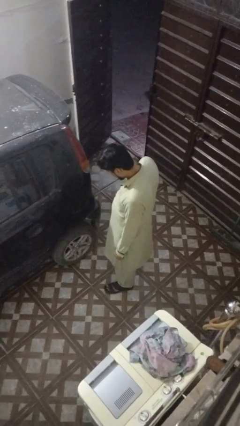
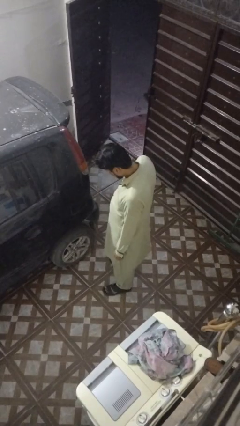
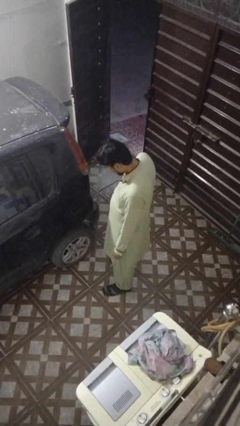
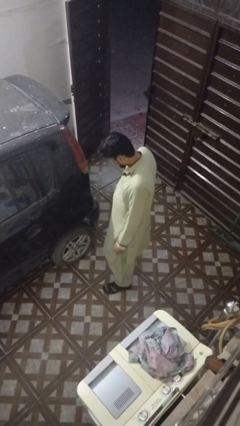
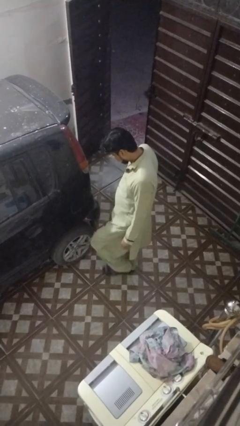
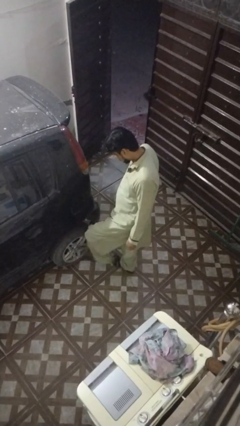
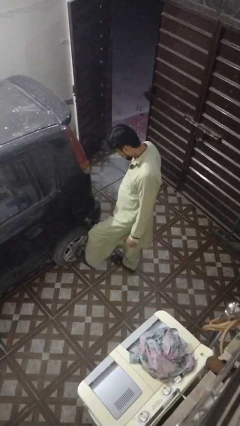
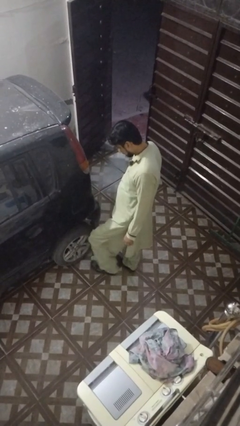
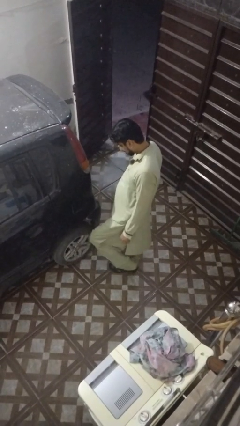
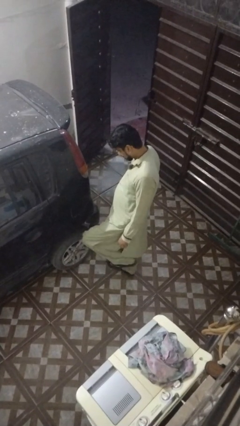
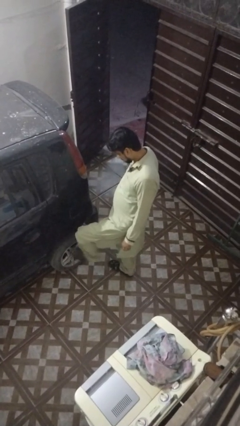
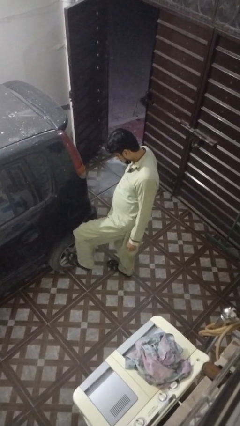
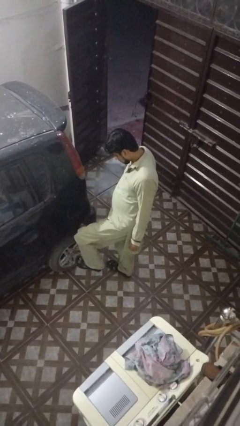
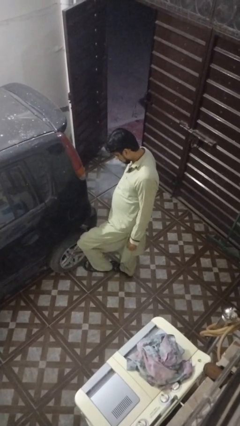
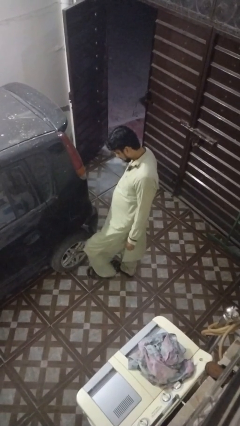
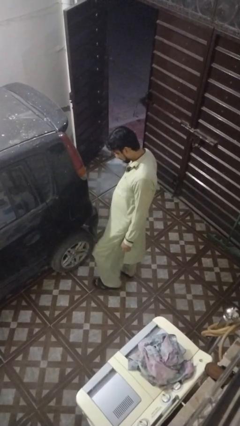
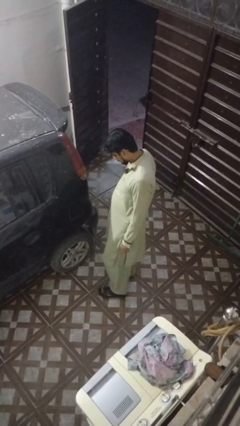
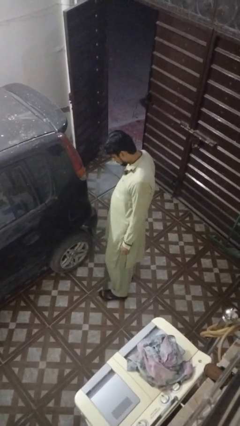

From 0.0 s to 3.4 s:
person kicks car tires

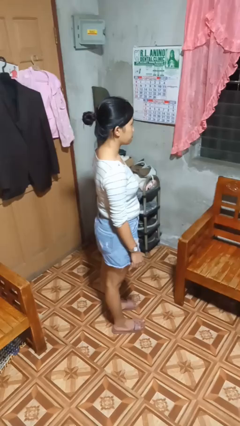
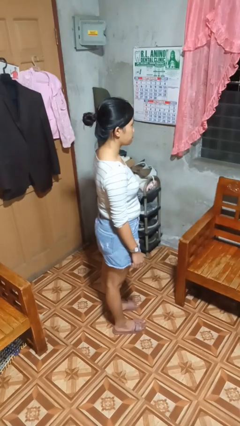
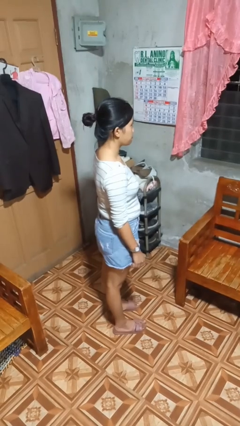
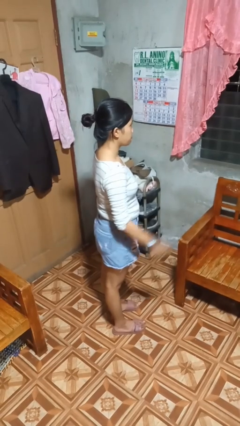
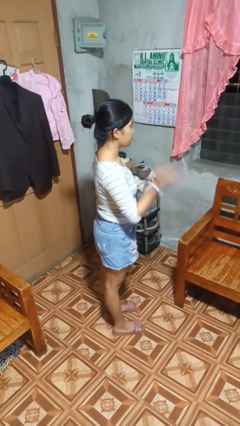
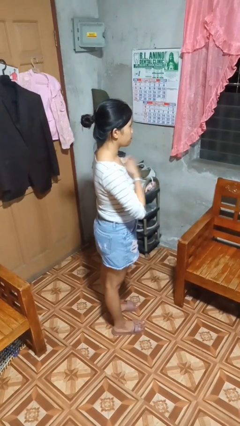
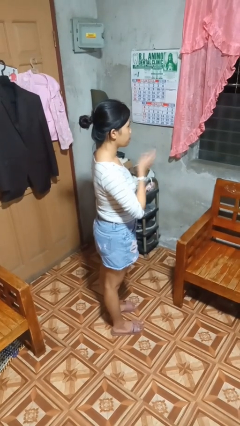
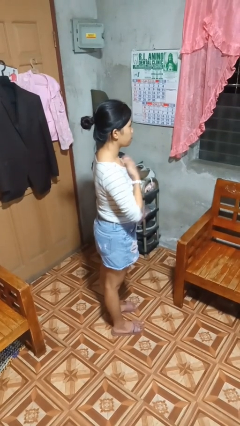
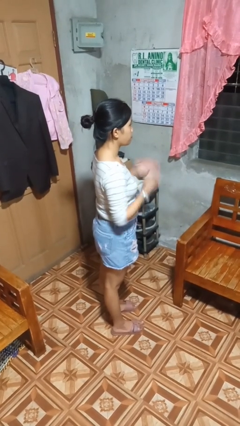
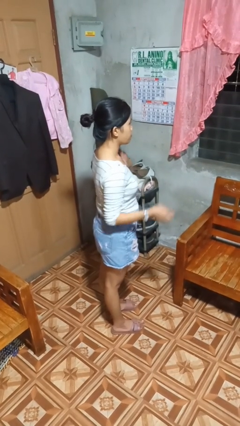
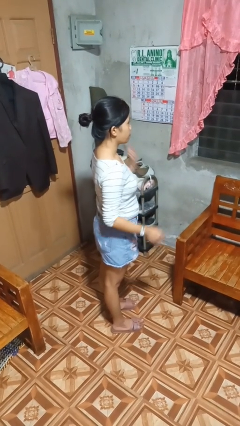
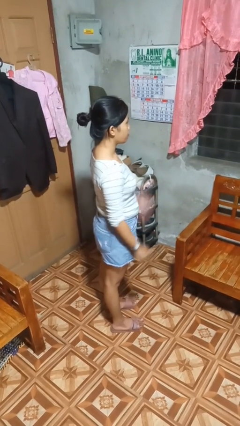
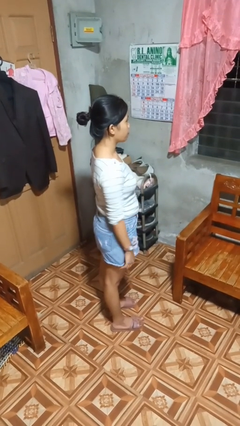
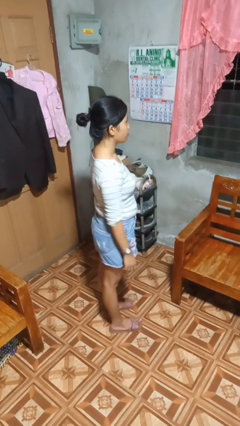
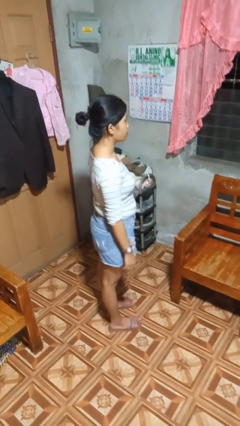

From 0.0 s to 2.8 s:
person drums on chest

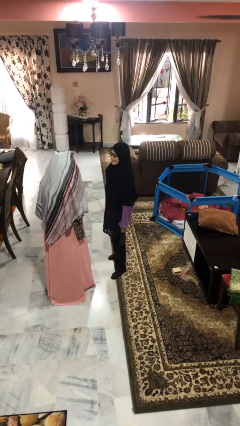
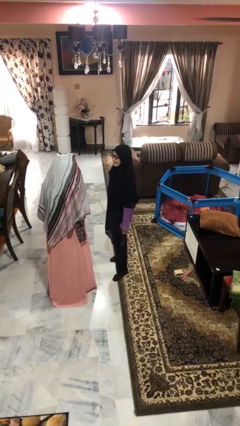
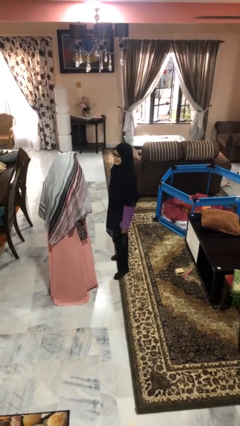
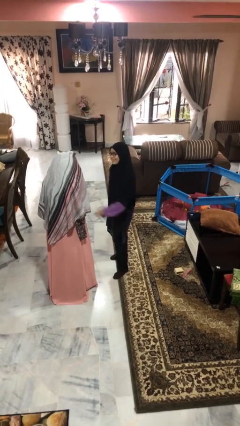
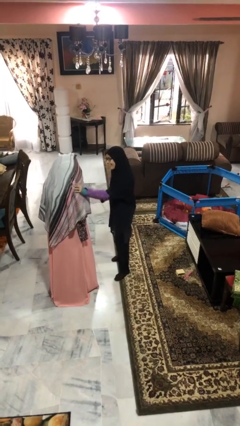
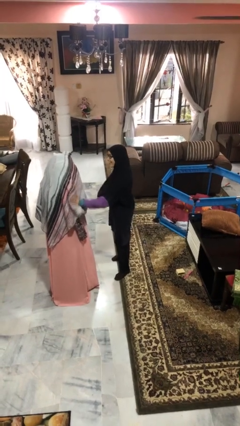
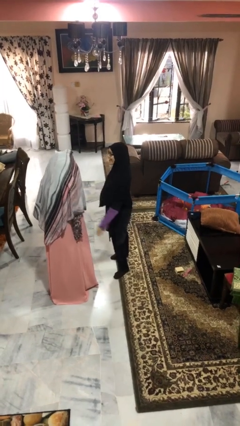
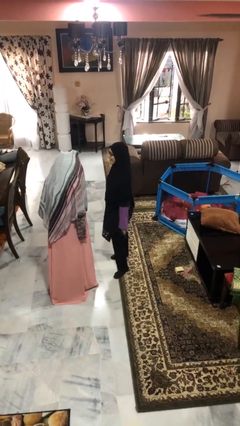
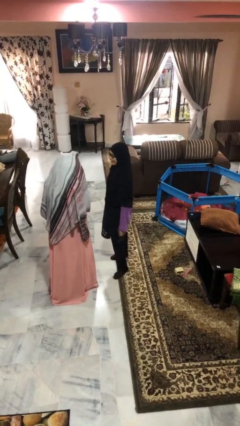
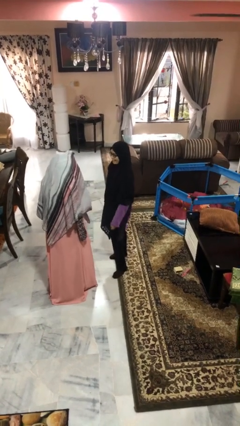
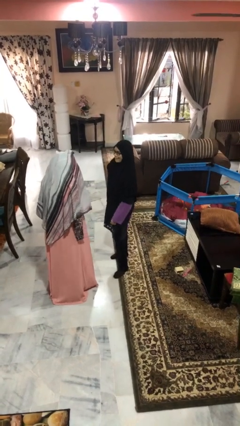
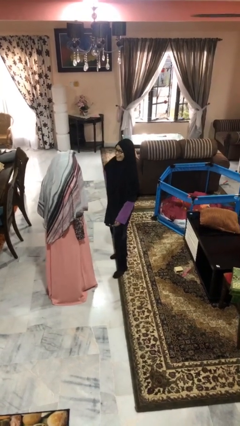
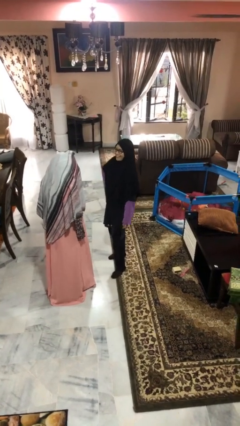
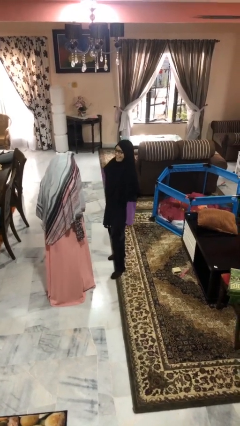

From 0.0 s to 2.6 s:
person shoves person

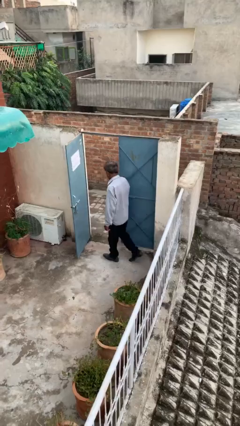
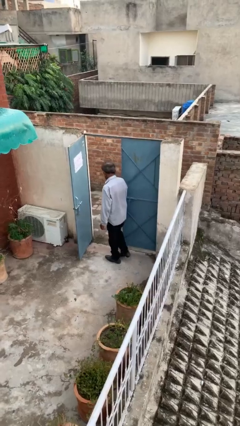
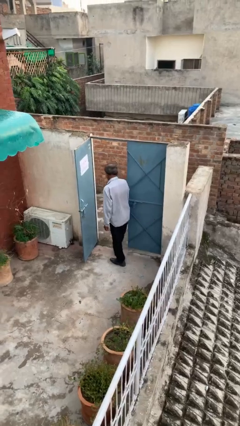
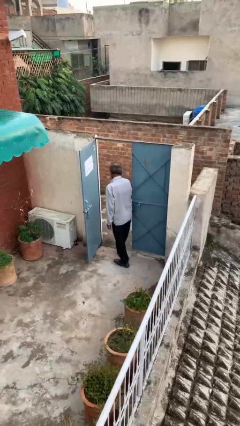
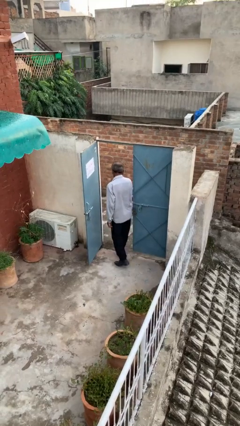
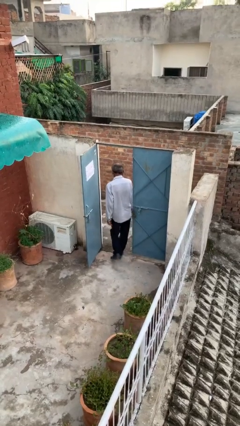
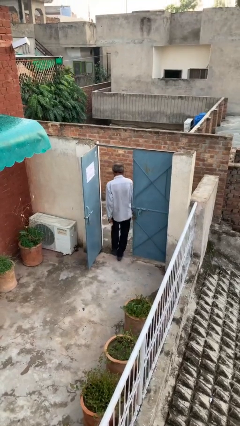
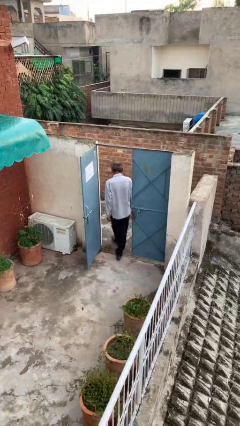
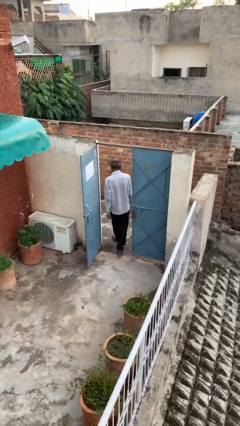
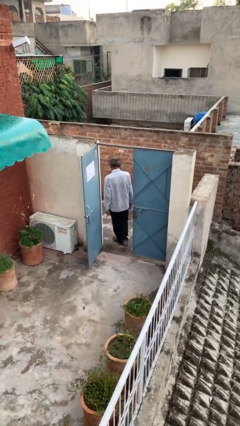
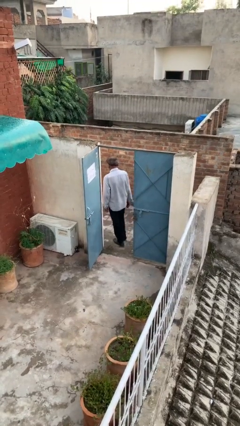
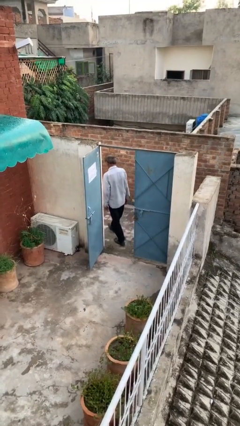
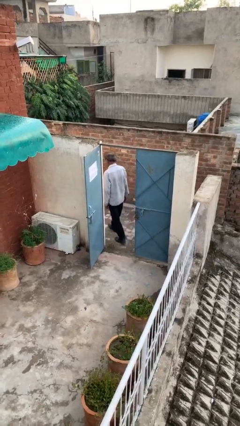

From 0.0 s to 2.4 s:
person exits scene through structure

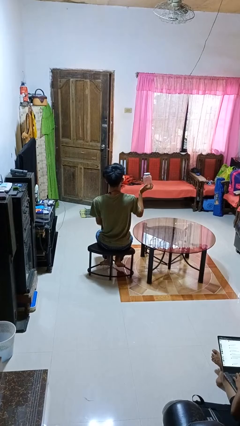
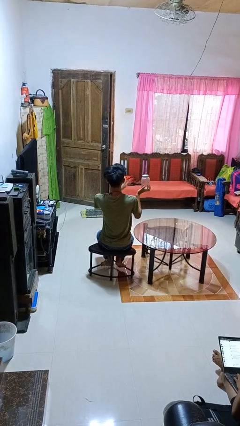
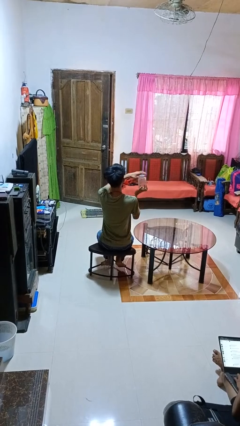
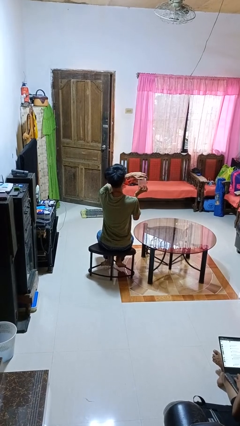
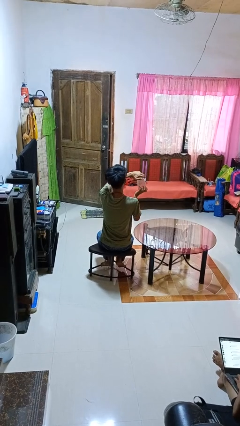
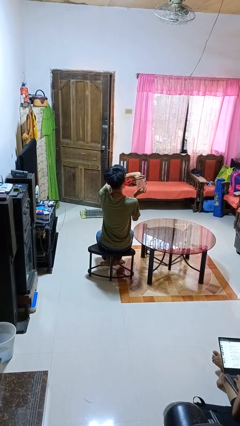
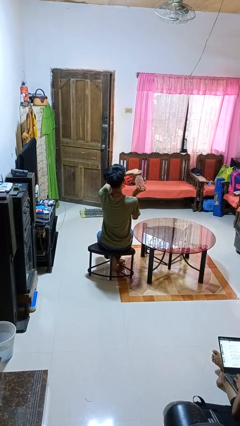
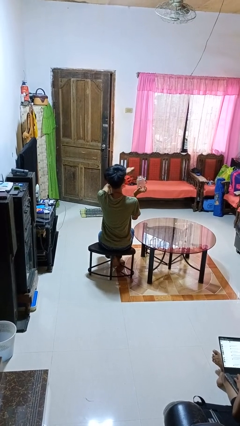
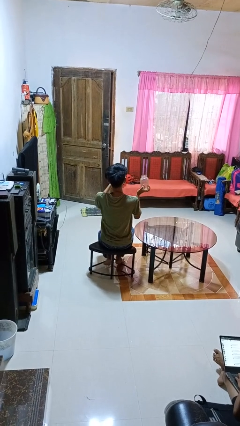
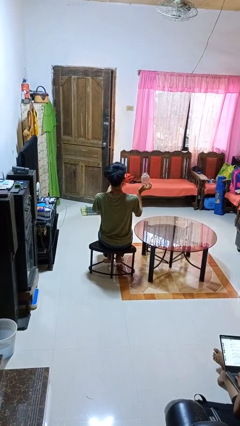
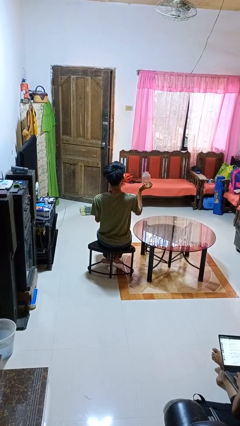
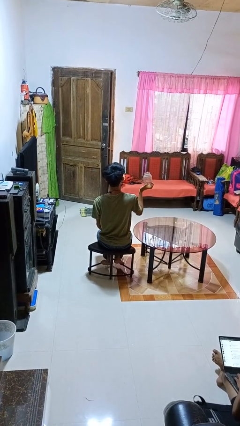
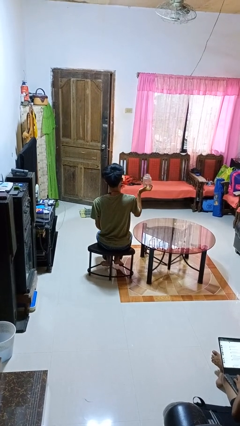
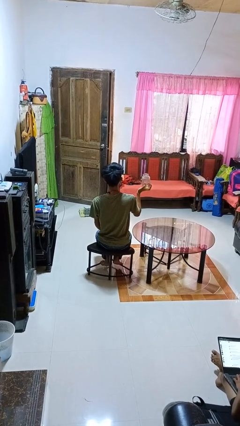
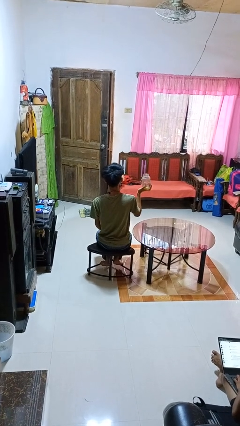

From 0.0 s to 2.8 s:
person opens jar

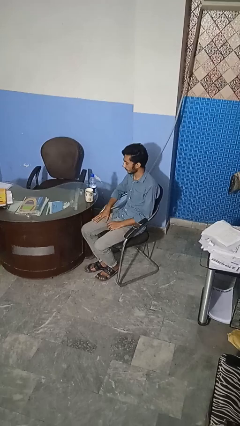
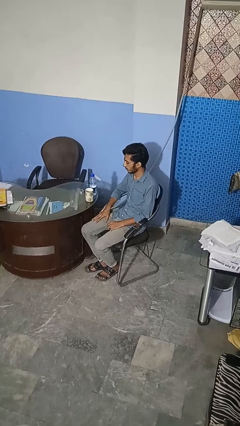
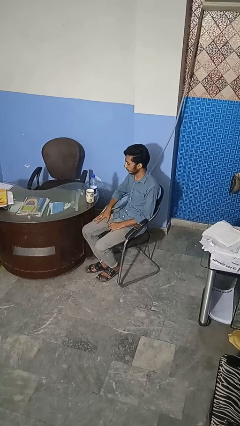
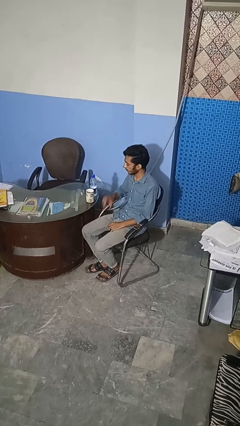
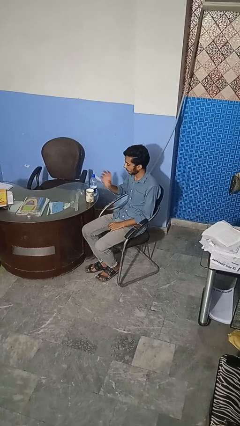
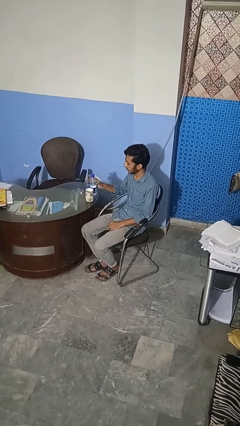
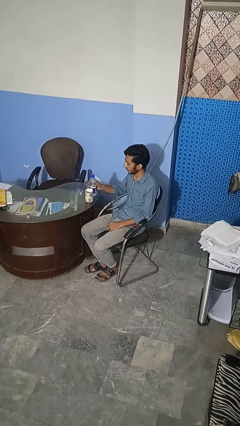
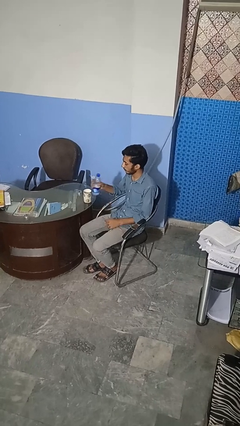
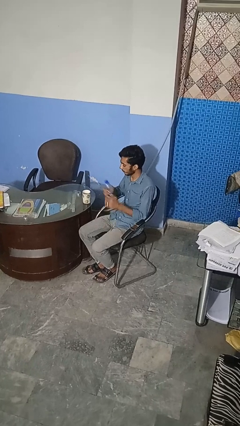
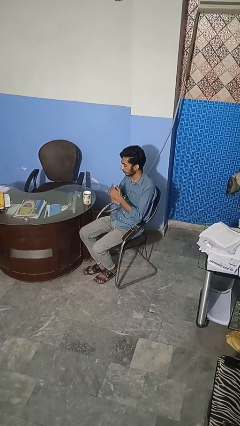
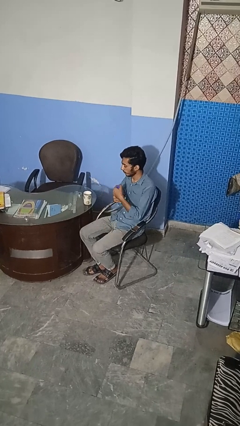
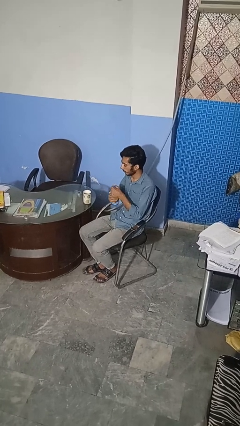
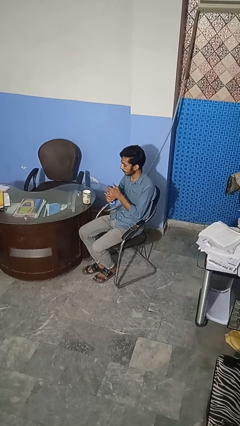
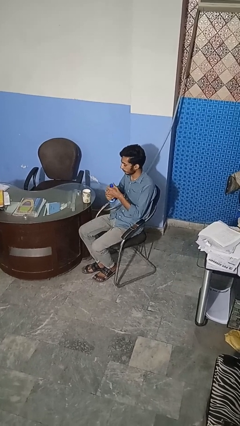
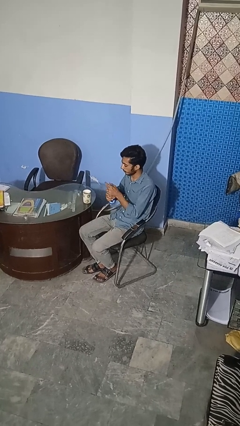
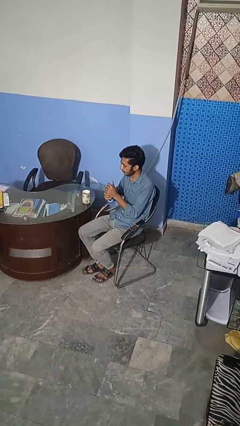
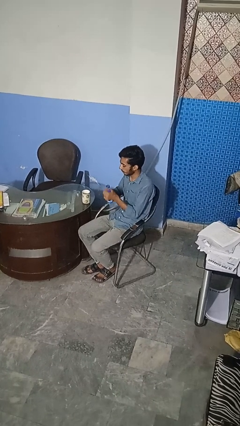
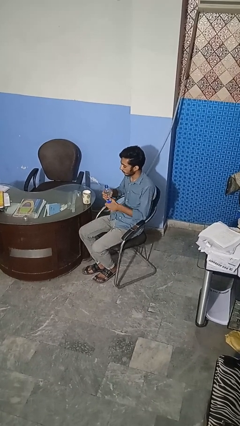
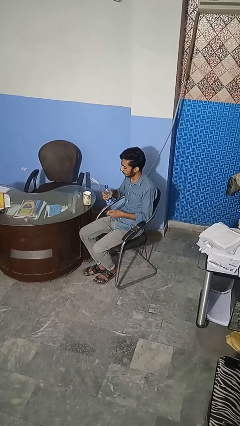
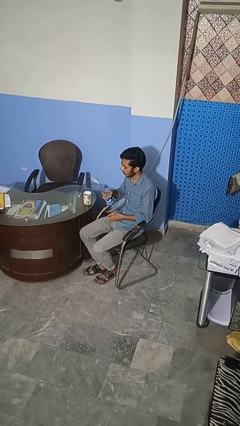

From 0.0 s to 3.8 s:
person unscrews lid from bottle
